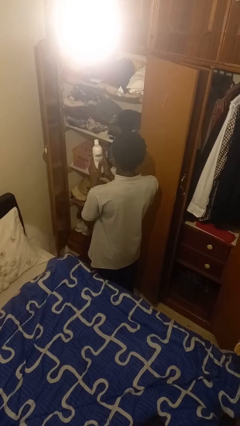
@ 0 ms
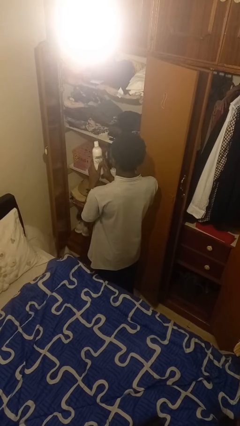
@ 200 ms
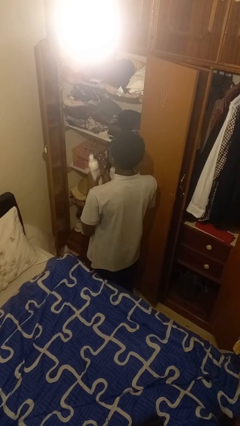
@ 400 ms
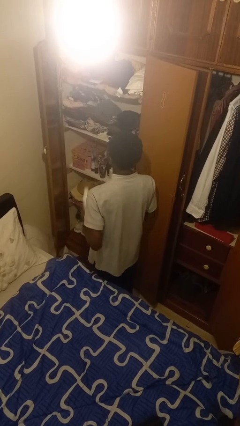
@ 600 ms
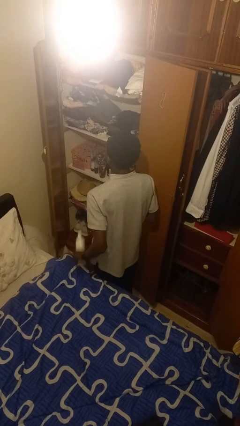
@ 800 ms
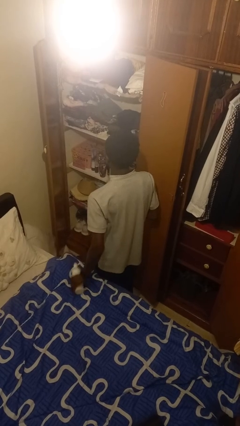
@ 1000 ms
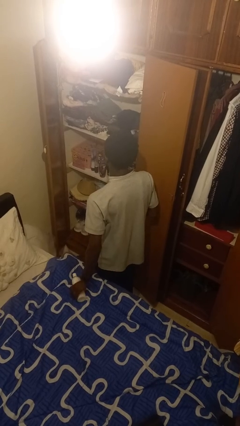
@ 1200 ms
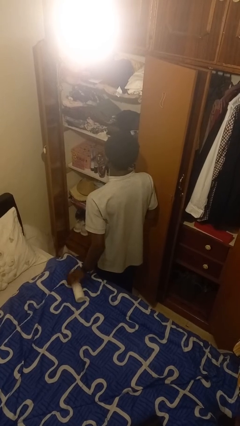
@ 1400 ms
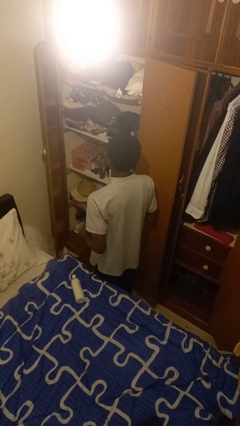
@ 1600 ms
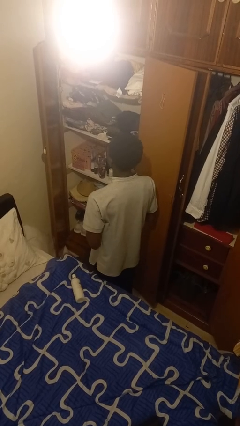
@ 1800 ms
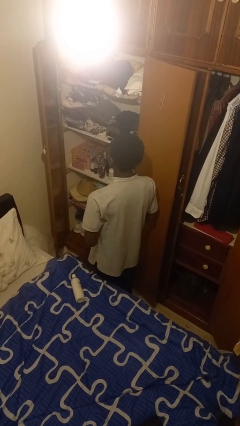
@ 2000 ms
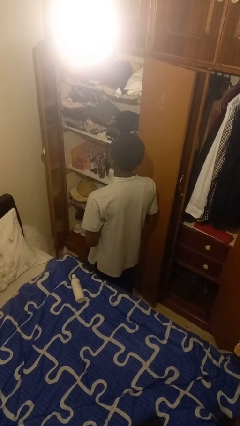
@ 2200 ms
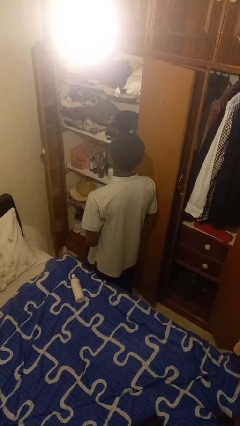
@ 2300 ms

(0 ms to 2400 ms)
person puts down object on bed

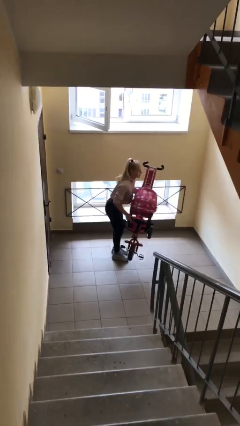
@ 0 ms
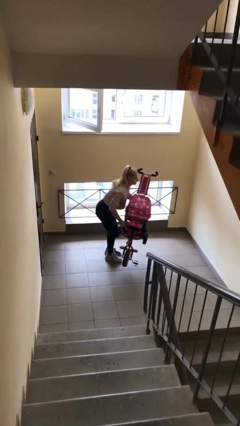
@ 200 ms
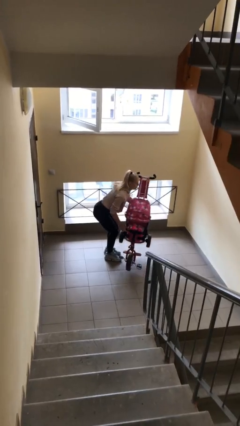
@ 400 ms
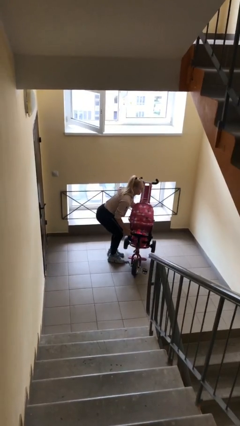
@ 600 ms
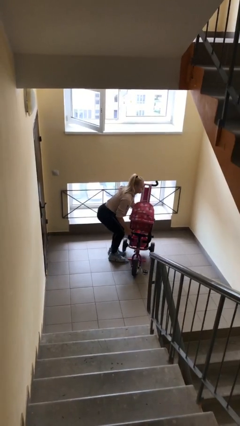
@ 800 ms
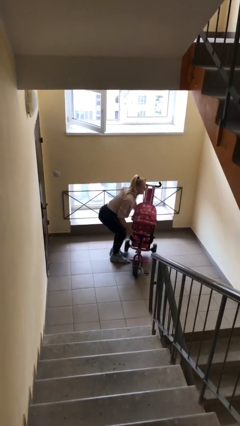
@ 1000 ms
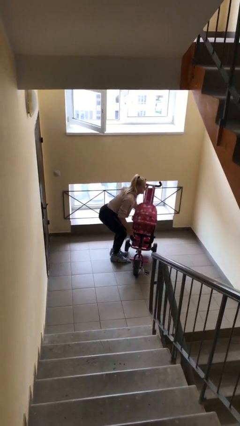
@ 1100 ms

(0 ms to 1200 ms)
person puts down object on floor

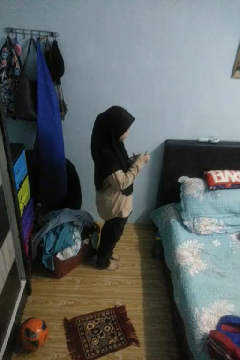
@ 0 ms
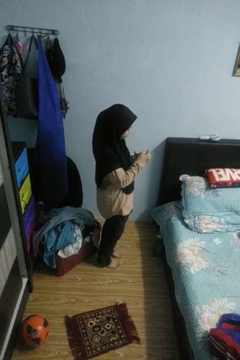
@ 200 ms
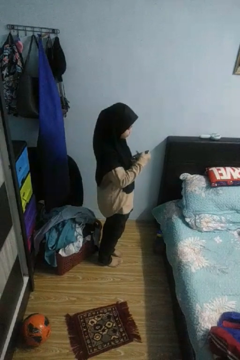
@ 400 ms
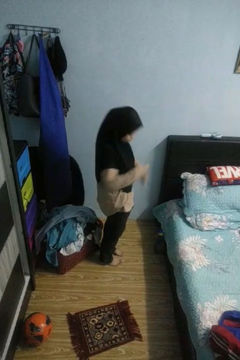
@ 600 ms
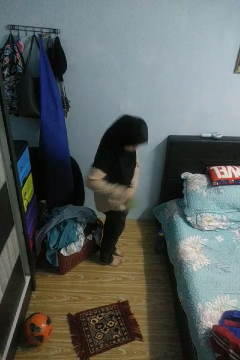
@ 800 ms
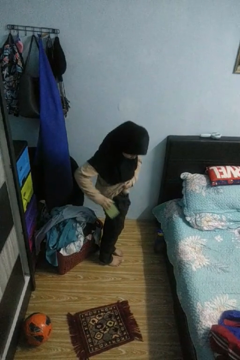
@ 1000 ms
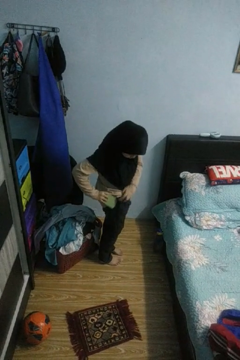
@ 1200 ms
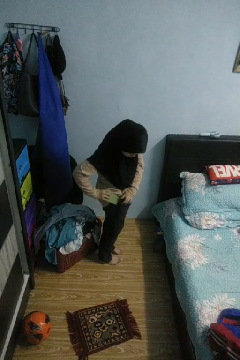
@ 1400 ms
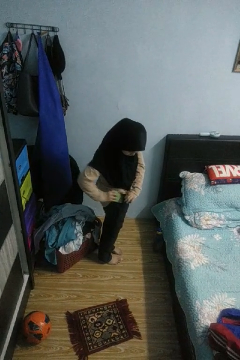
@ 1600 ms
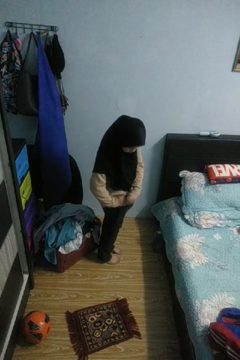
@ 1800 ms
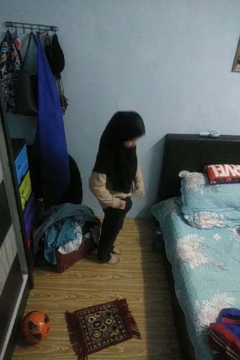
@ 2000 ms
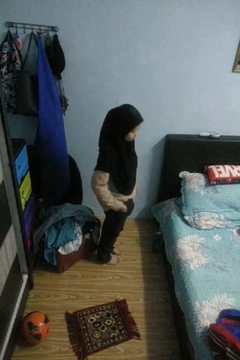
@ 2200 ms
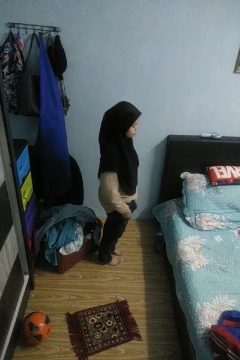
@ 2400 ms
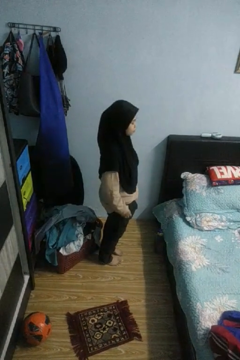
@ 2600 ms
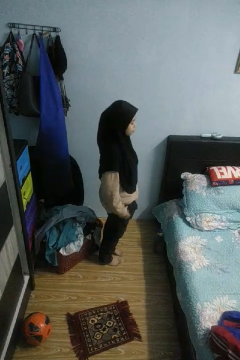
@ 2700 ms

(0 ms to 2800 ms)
person puts phone into pocket

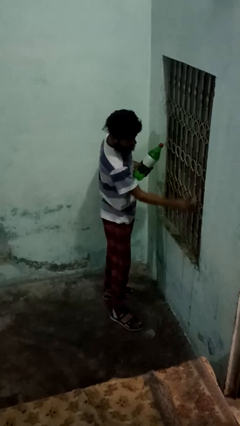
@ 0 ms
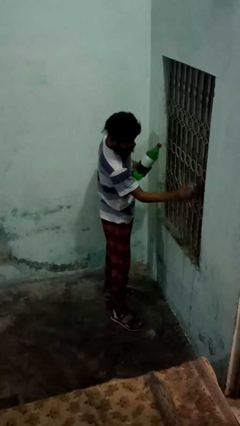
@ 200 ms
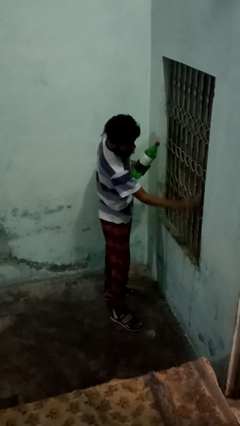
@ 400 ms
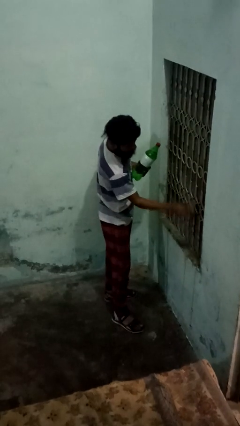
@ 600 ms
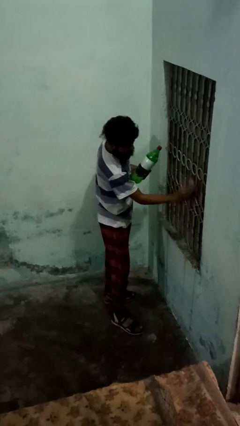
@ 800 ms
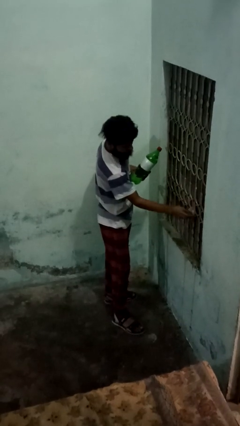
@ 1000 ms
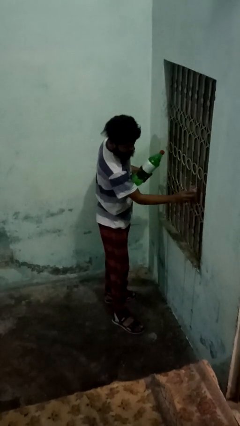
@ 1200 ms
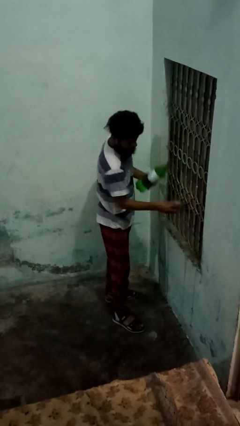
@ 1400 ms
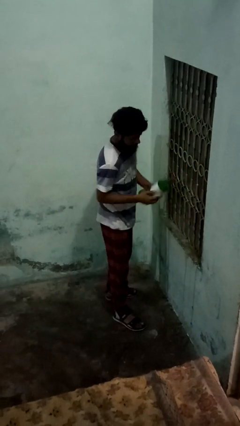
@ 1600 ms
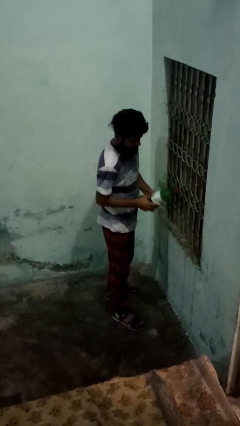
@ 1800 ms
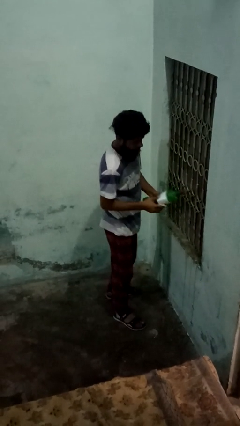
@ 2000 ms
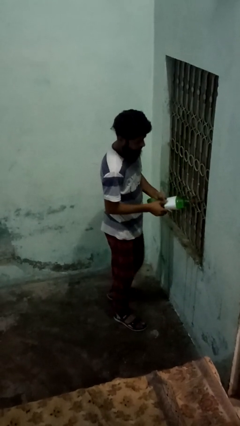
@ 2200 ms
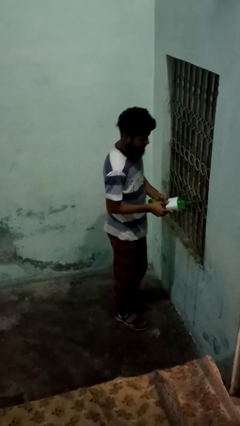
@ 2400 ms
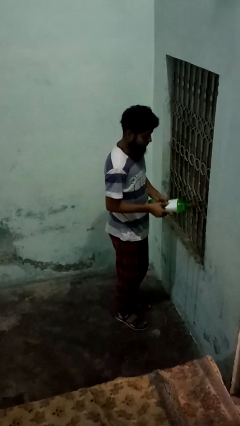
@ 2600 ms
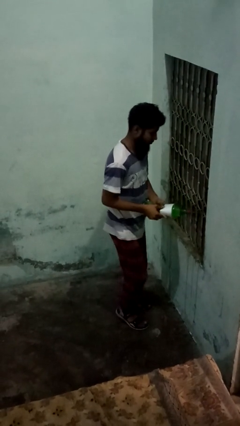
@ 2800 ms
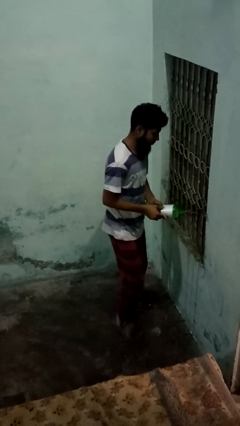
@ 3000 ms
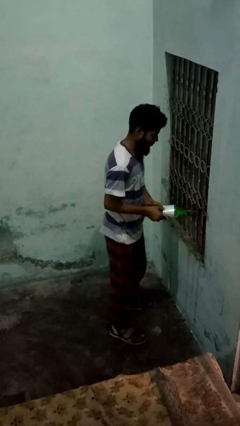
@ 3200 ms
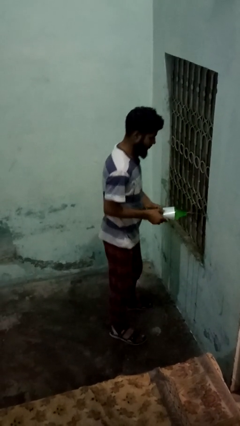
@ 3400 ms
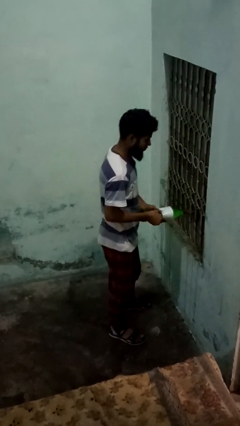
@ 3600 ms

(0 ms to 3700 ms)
person sprays from bottle

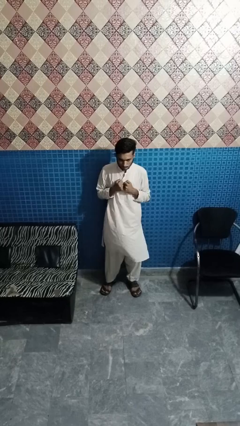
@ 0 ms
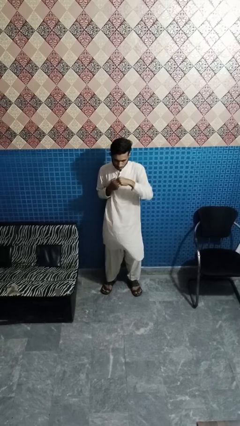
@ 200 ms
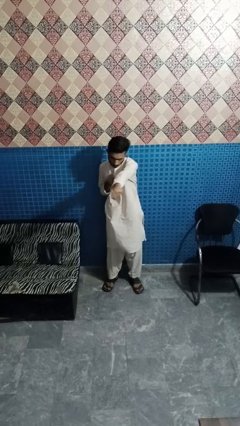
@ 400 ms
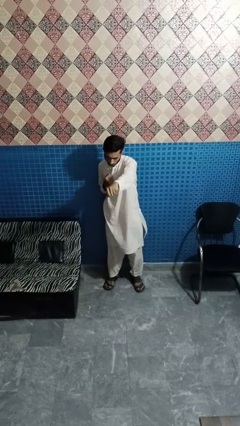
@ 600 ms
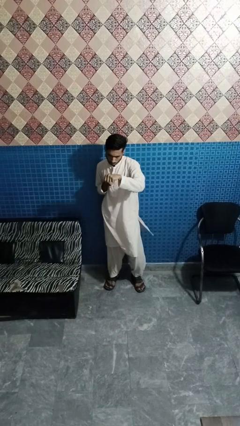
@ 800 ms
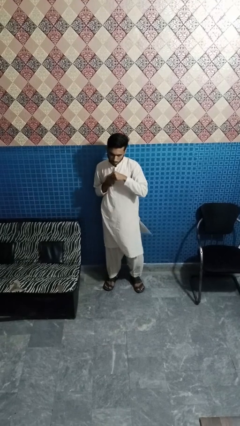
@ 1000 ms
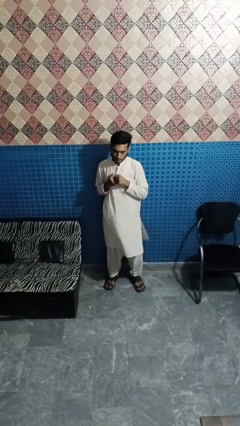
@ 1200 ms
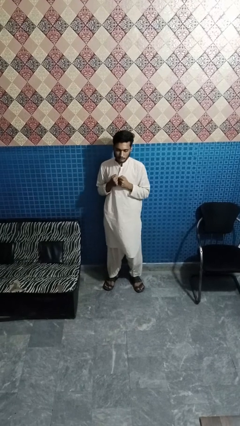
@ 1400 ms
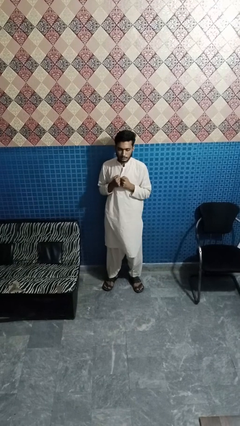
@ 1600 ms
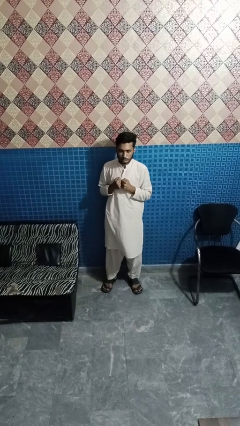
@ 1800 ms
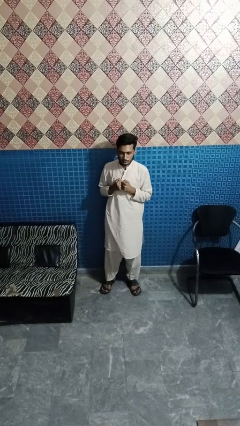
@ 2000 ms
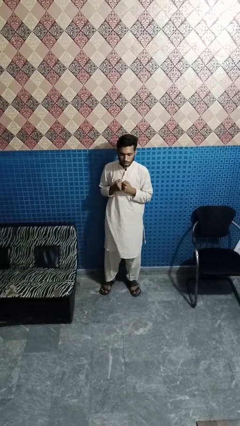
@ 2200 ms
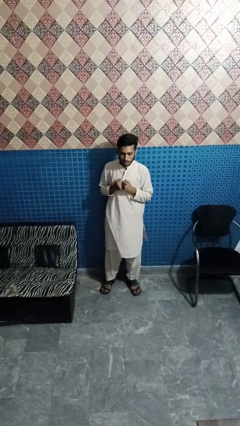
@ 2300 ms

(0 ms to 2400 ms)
person punches

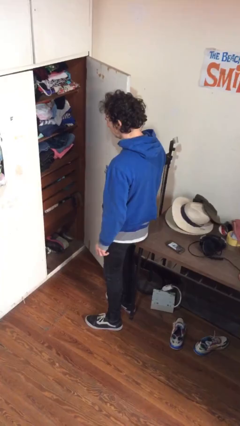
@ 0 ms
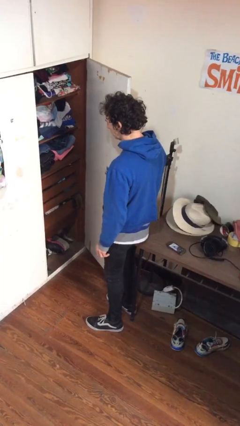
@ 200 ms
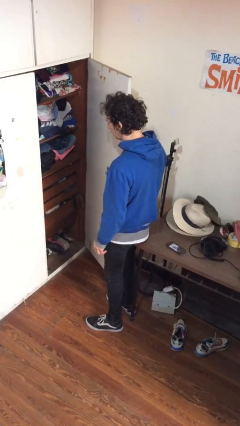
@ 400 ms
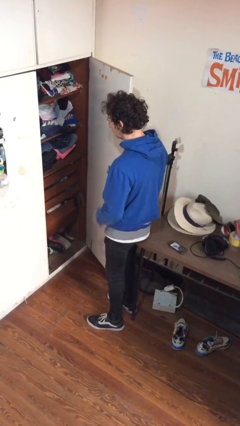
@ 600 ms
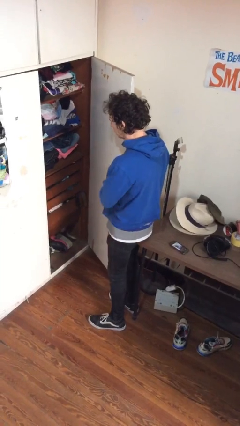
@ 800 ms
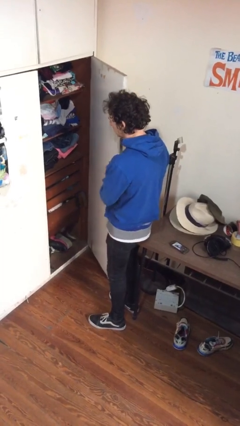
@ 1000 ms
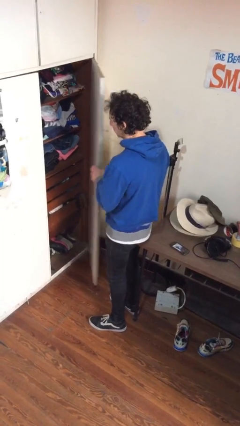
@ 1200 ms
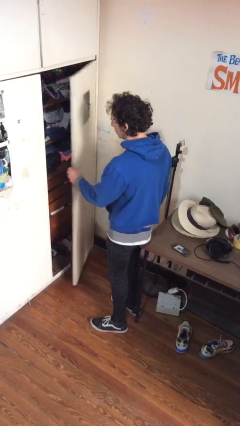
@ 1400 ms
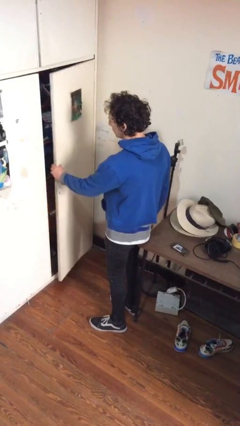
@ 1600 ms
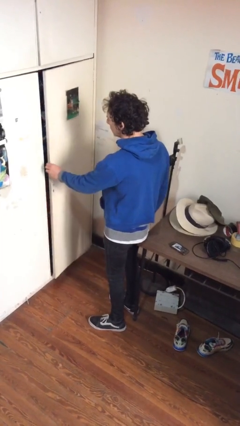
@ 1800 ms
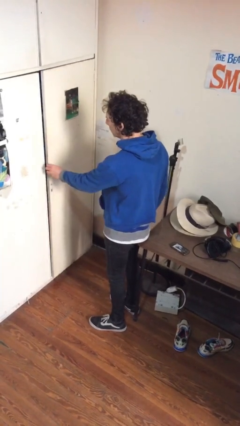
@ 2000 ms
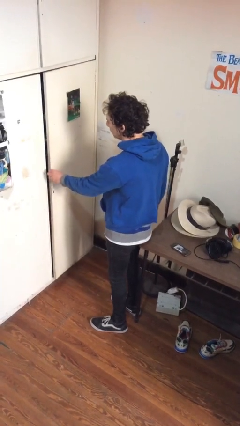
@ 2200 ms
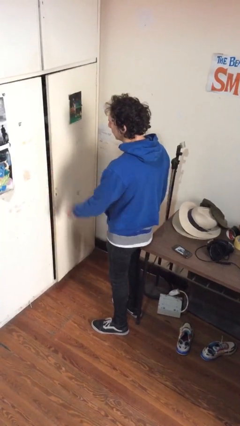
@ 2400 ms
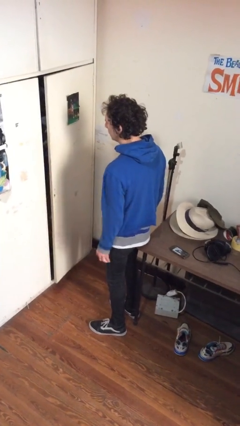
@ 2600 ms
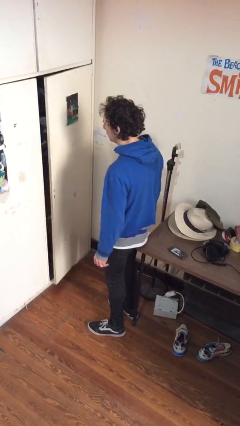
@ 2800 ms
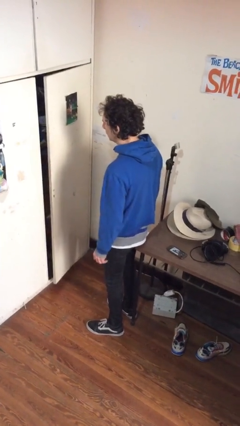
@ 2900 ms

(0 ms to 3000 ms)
person closes closet door

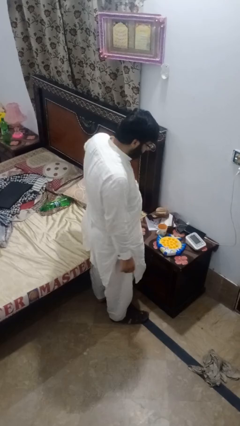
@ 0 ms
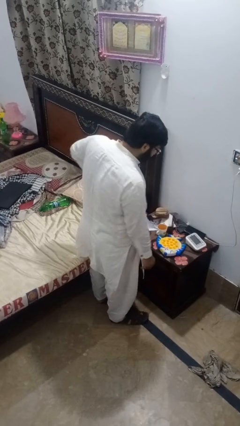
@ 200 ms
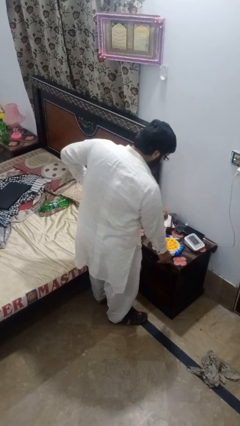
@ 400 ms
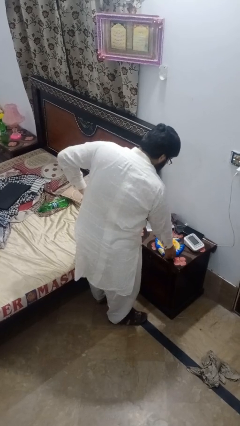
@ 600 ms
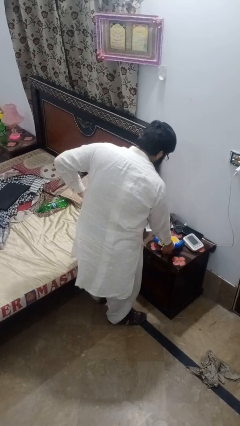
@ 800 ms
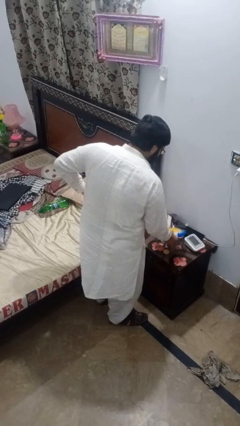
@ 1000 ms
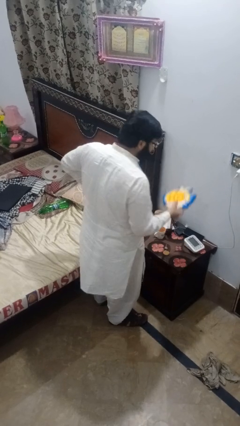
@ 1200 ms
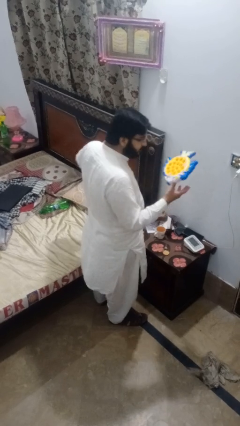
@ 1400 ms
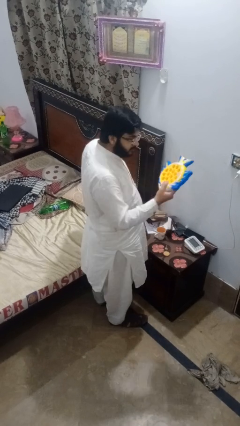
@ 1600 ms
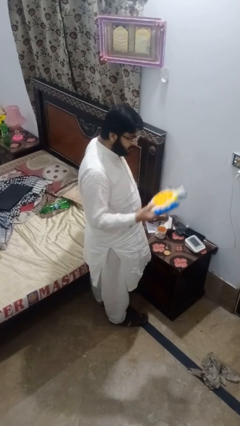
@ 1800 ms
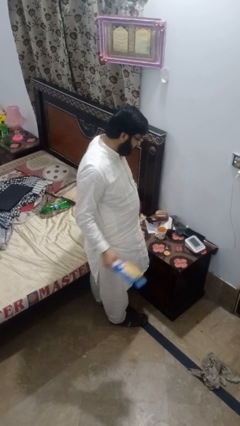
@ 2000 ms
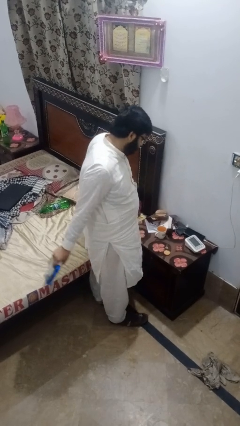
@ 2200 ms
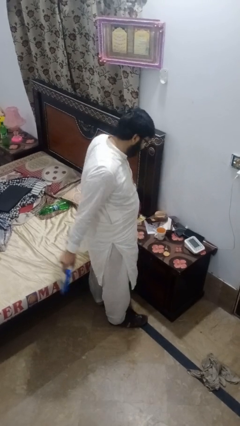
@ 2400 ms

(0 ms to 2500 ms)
person picks up object from countertop
